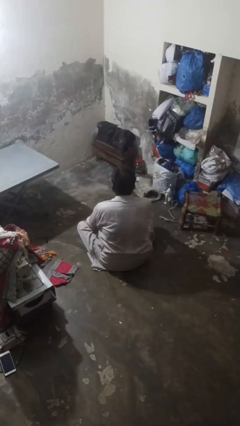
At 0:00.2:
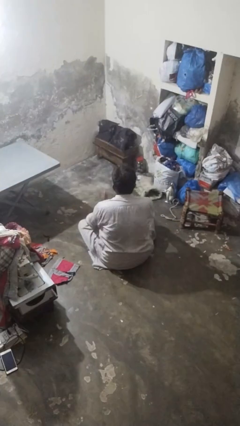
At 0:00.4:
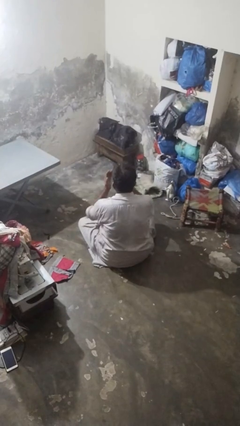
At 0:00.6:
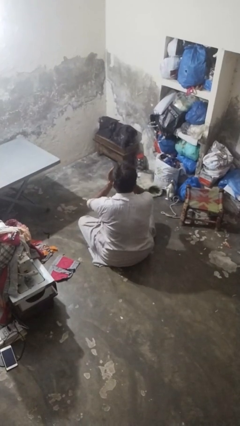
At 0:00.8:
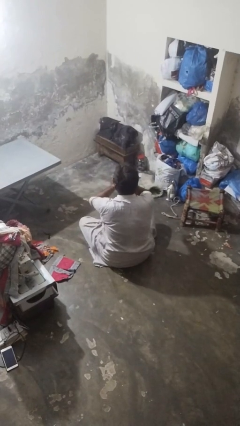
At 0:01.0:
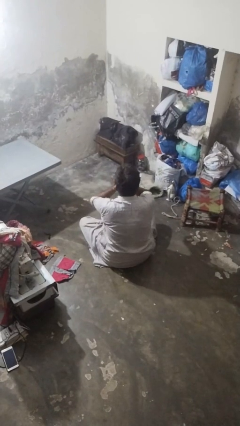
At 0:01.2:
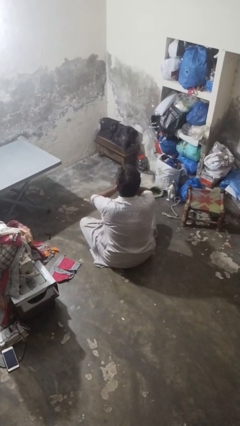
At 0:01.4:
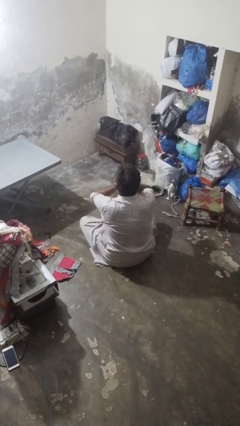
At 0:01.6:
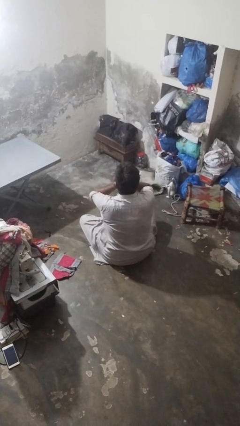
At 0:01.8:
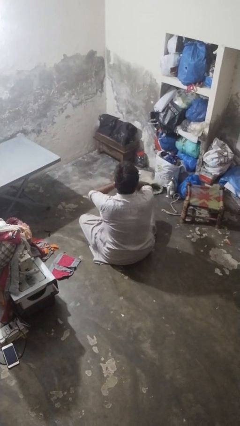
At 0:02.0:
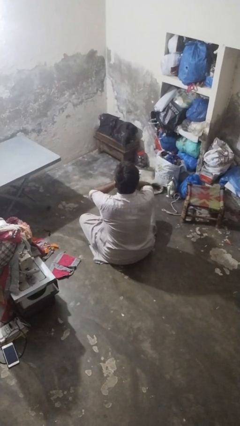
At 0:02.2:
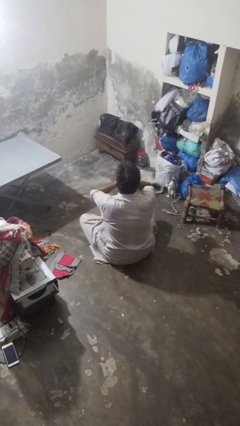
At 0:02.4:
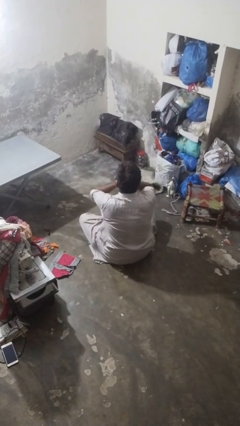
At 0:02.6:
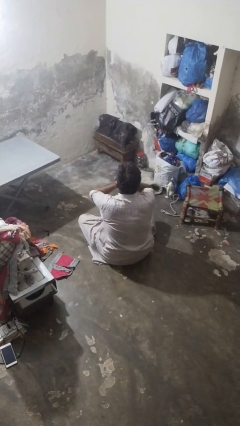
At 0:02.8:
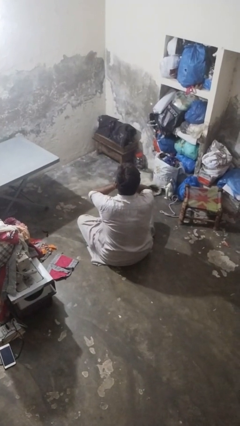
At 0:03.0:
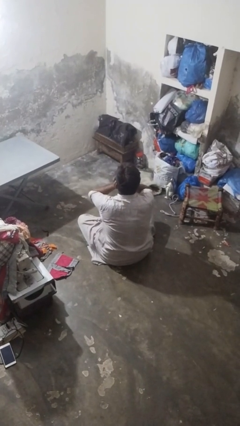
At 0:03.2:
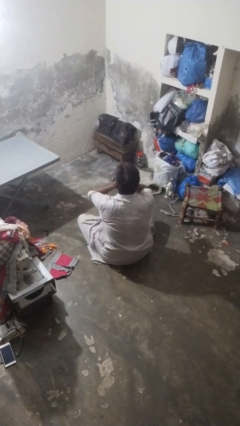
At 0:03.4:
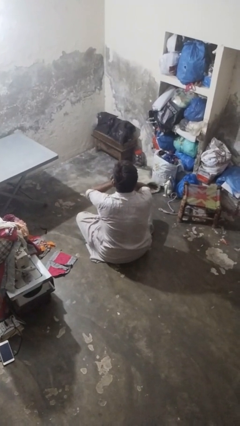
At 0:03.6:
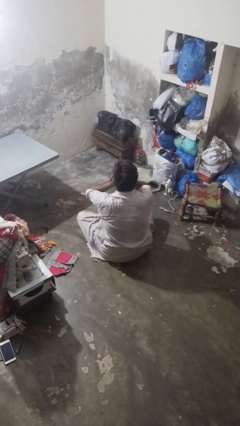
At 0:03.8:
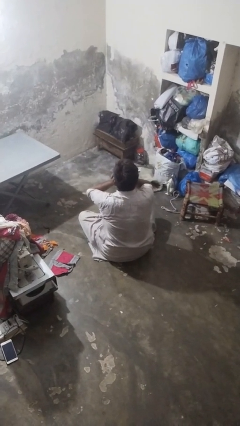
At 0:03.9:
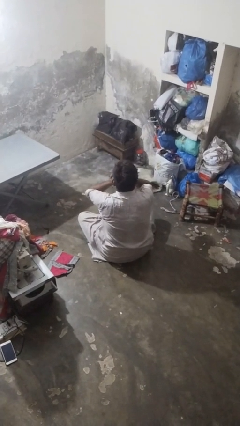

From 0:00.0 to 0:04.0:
person covers face with hands

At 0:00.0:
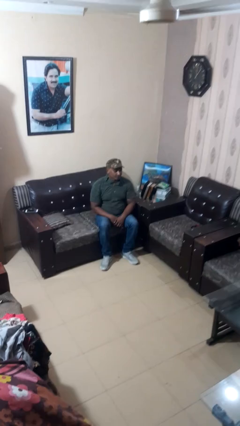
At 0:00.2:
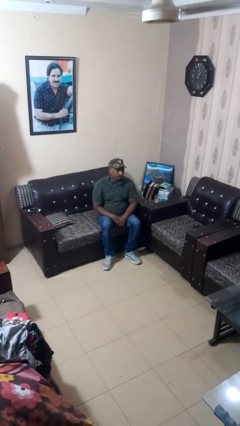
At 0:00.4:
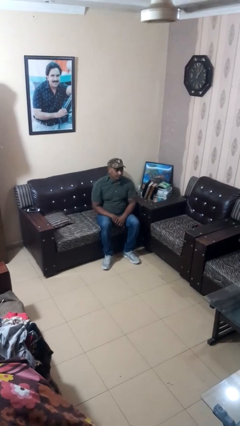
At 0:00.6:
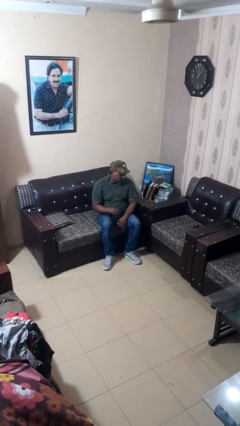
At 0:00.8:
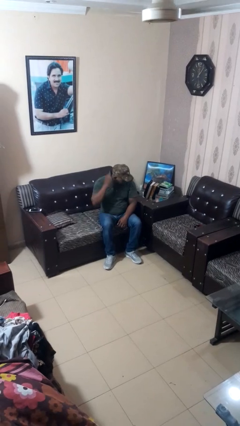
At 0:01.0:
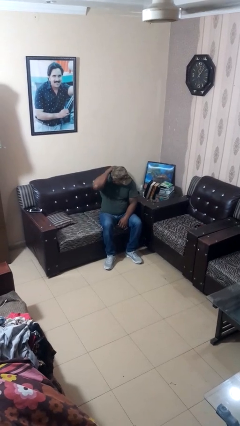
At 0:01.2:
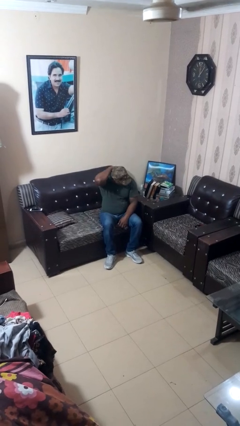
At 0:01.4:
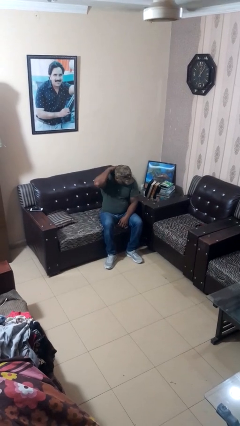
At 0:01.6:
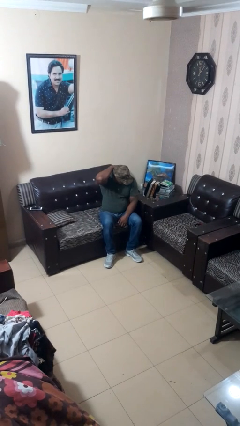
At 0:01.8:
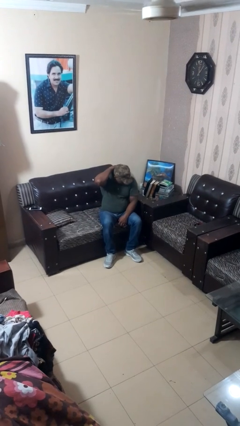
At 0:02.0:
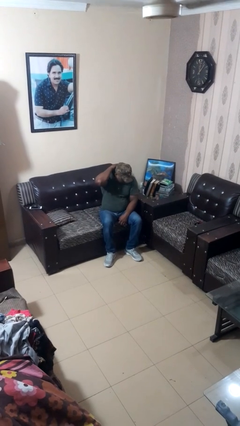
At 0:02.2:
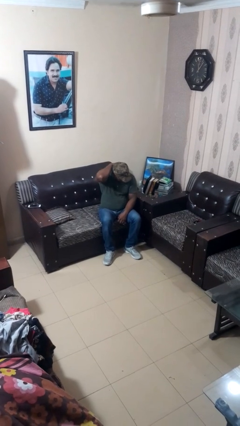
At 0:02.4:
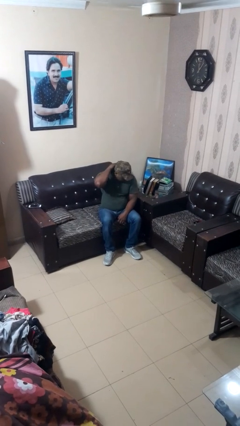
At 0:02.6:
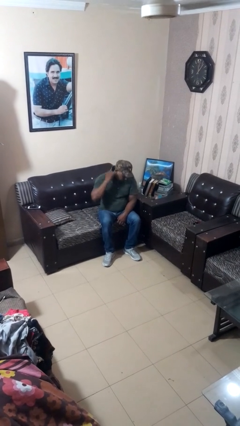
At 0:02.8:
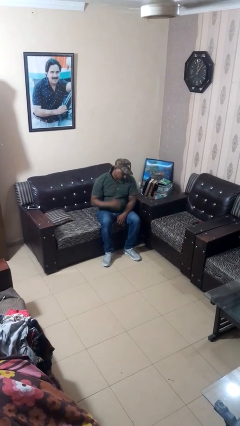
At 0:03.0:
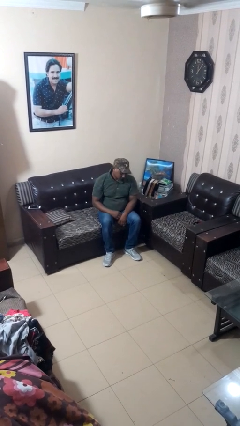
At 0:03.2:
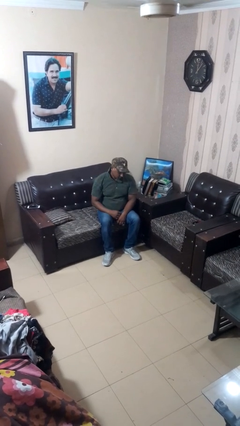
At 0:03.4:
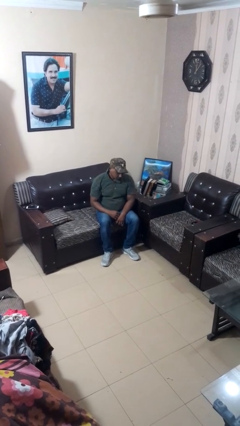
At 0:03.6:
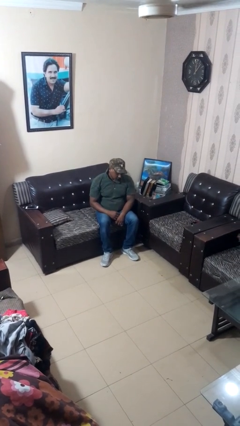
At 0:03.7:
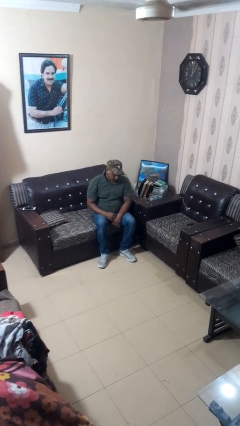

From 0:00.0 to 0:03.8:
person rubs neck

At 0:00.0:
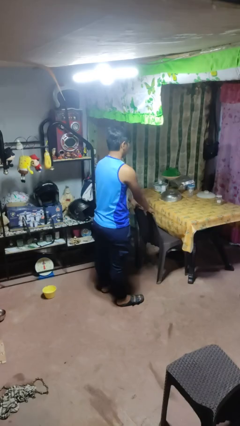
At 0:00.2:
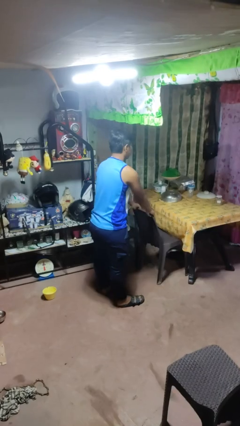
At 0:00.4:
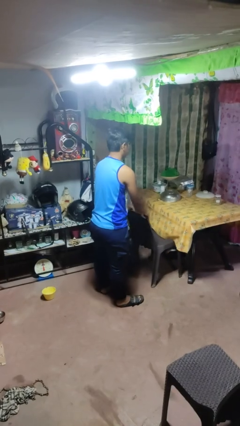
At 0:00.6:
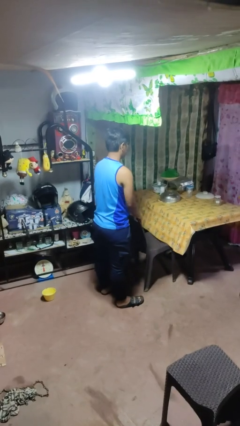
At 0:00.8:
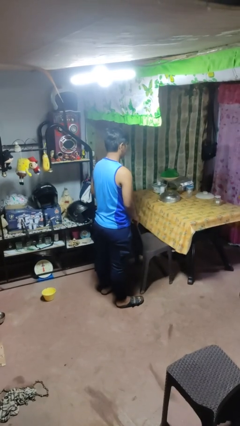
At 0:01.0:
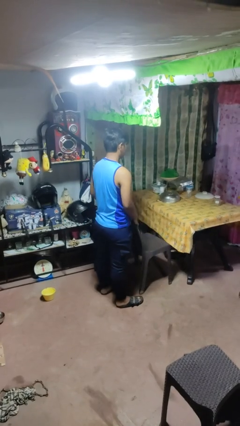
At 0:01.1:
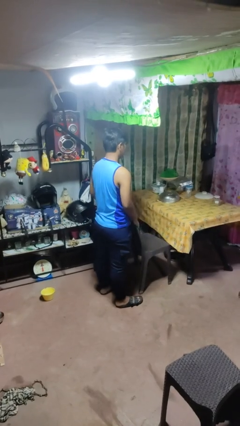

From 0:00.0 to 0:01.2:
person pulls out chair

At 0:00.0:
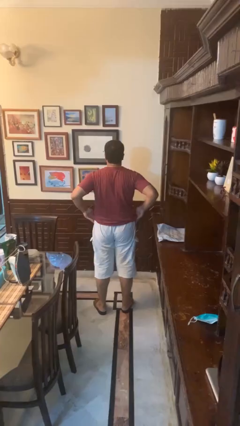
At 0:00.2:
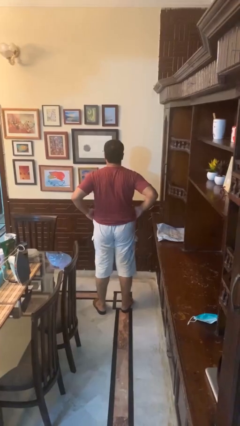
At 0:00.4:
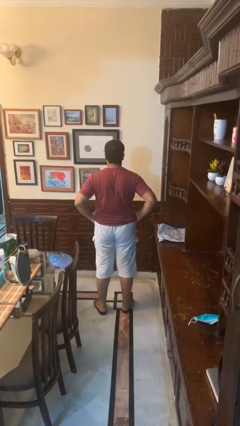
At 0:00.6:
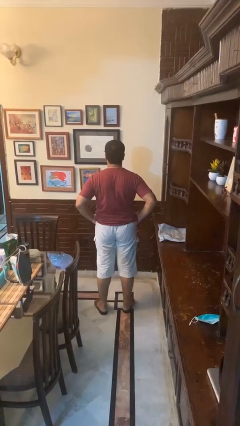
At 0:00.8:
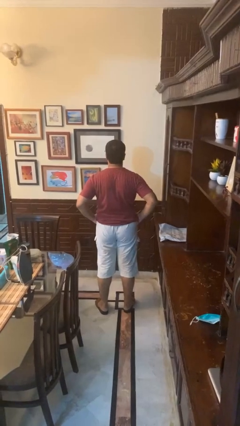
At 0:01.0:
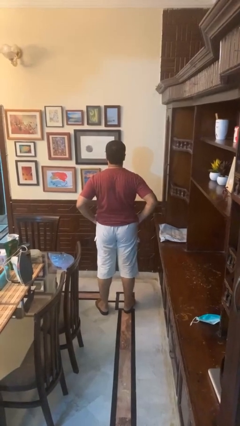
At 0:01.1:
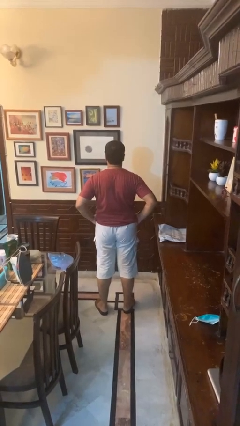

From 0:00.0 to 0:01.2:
person puts hands in back pockets

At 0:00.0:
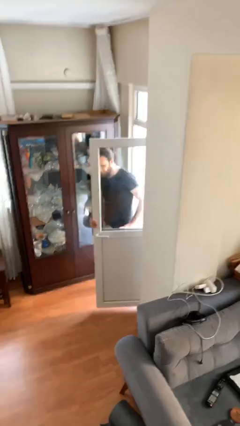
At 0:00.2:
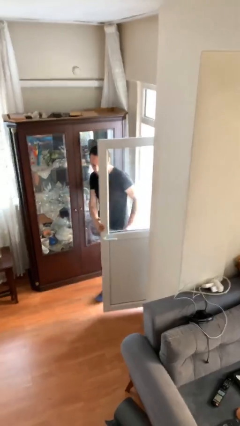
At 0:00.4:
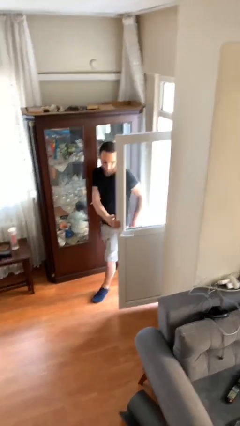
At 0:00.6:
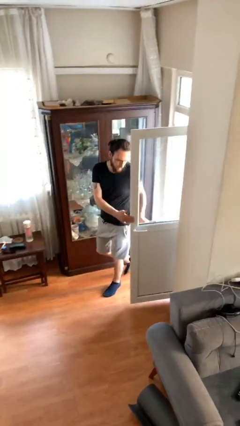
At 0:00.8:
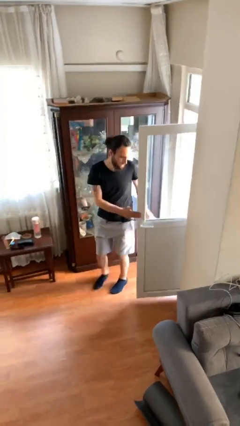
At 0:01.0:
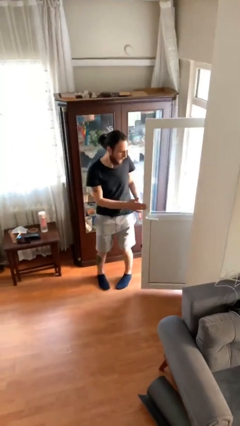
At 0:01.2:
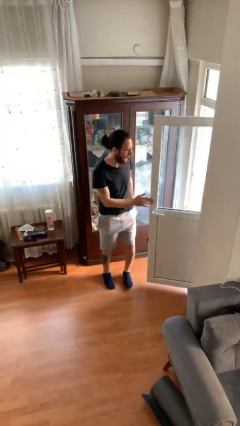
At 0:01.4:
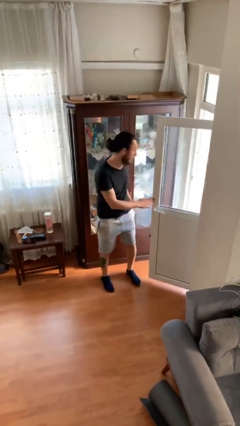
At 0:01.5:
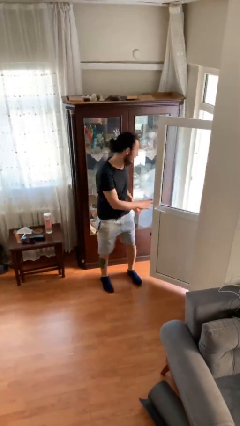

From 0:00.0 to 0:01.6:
person enters scene through structure

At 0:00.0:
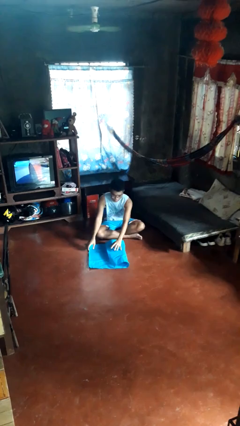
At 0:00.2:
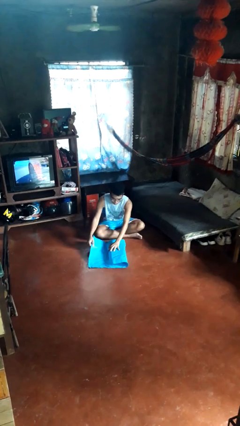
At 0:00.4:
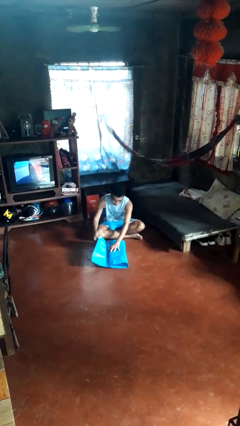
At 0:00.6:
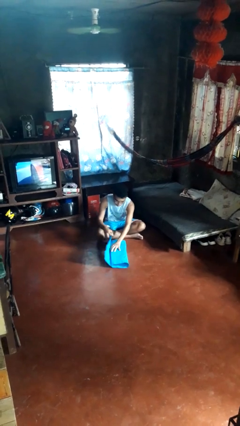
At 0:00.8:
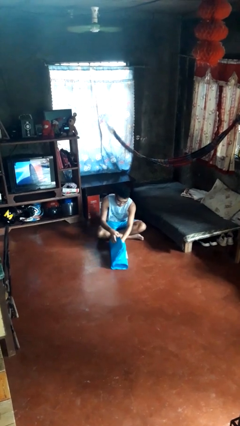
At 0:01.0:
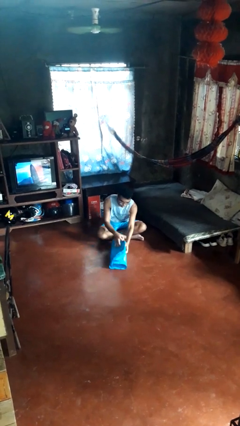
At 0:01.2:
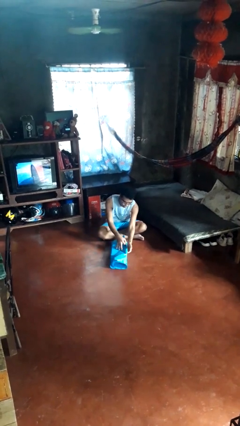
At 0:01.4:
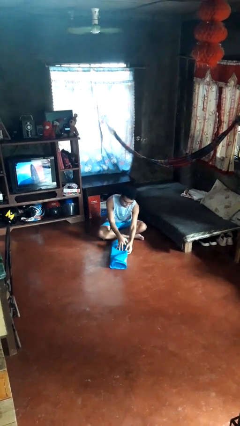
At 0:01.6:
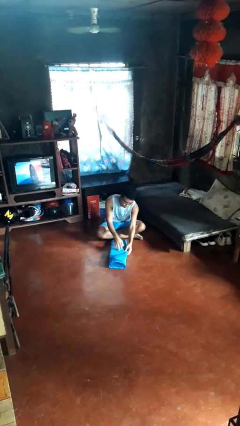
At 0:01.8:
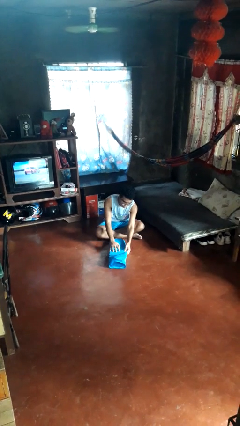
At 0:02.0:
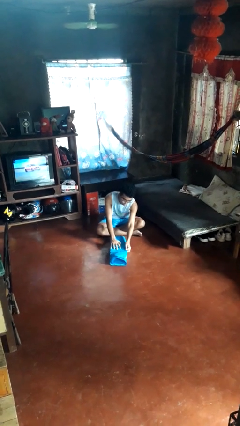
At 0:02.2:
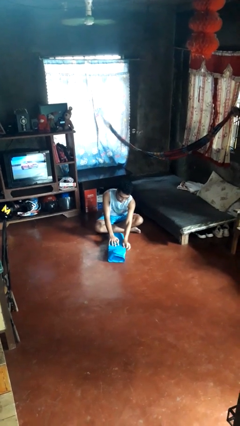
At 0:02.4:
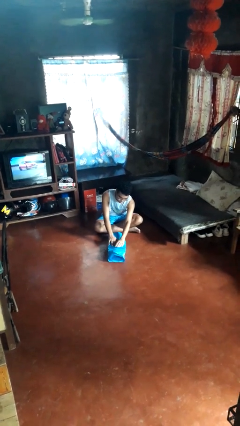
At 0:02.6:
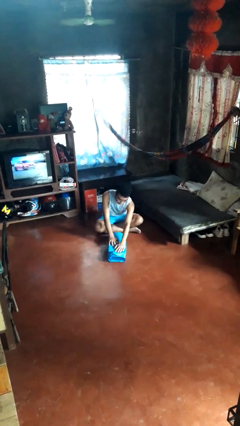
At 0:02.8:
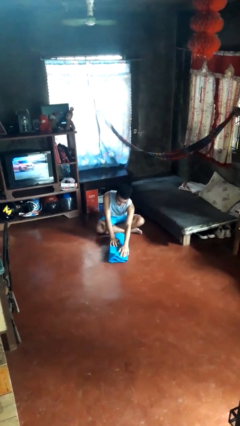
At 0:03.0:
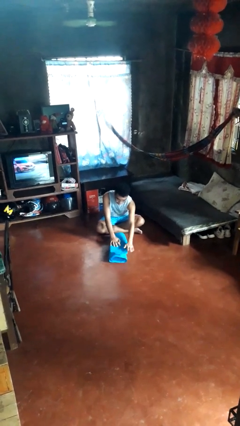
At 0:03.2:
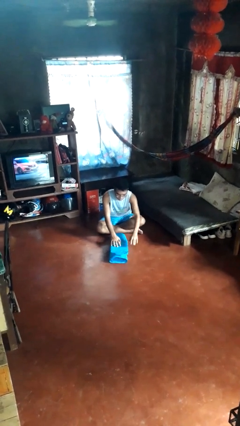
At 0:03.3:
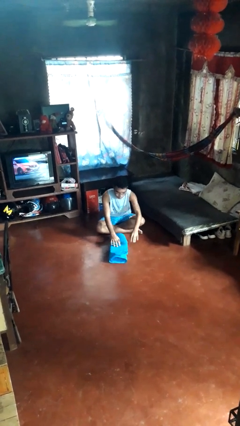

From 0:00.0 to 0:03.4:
person wraps box

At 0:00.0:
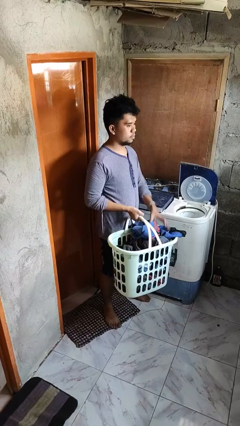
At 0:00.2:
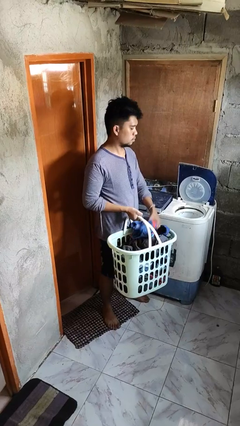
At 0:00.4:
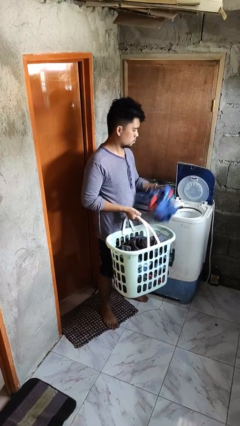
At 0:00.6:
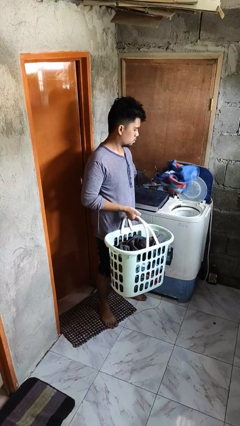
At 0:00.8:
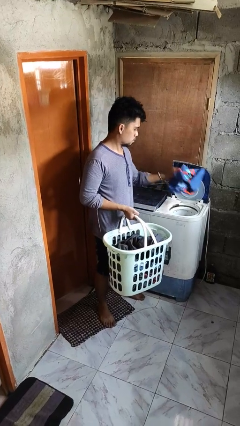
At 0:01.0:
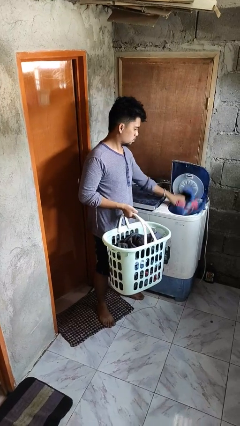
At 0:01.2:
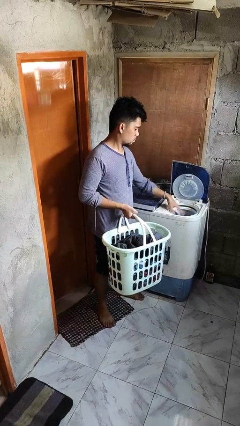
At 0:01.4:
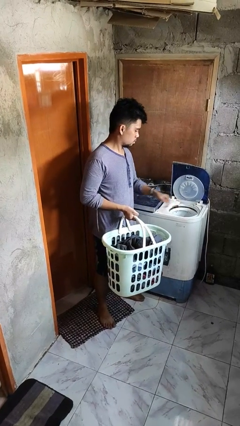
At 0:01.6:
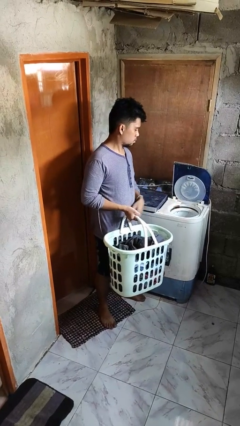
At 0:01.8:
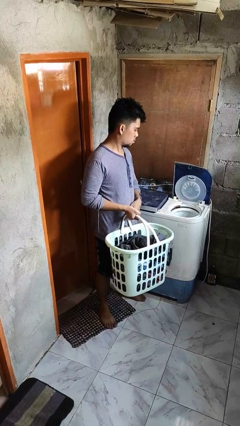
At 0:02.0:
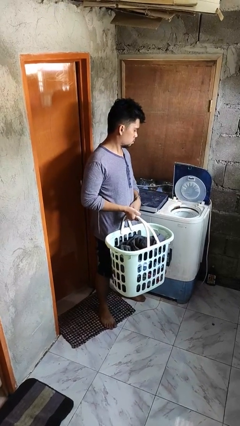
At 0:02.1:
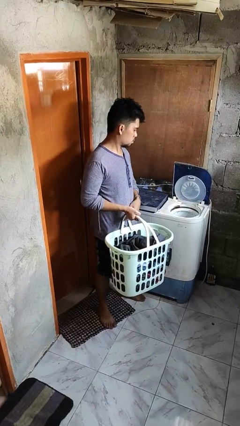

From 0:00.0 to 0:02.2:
person loads dryer
